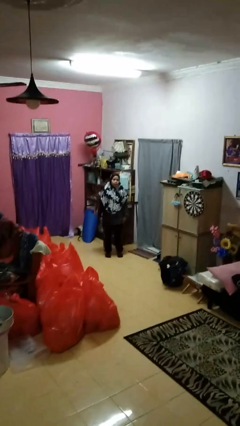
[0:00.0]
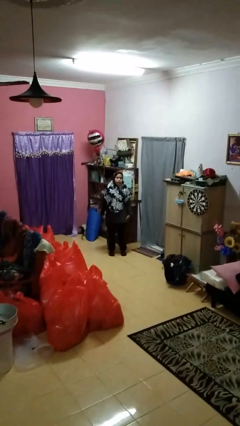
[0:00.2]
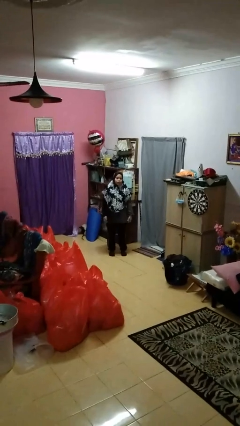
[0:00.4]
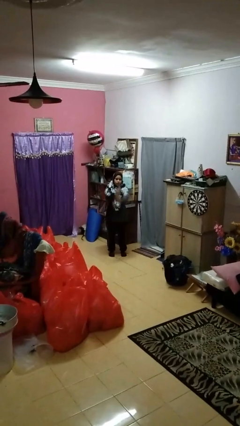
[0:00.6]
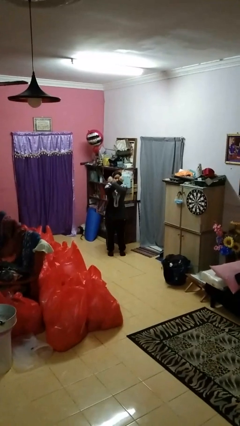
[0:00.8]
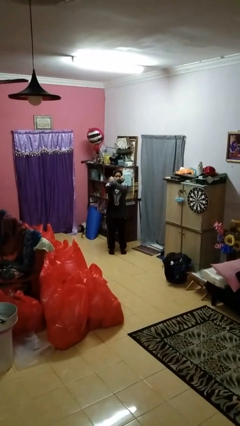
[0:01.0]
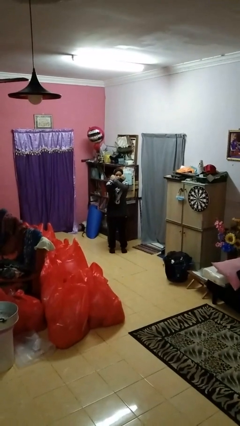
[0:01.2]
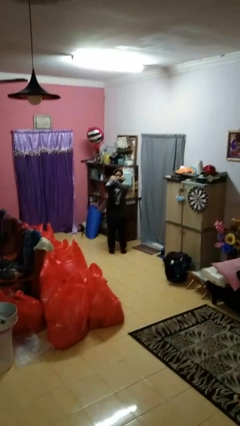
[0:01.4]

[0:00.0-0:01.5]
person crosses arms

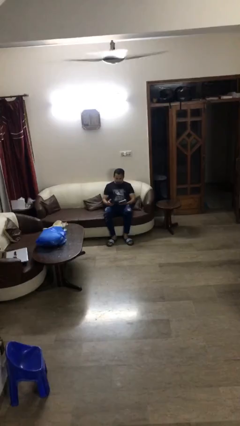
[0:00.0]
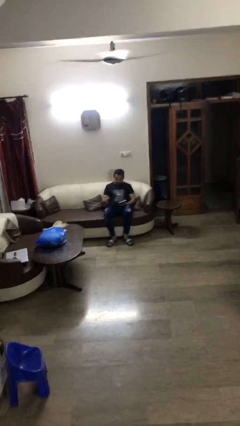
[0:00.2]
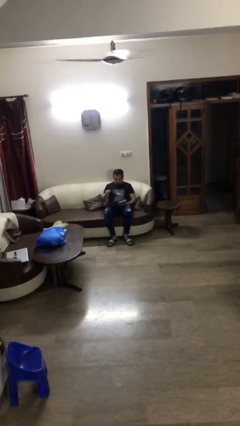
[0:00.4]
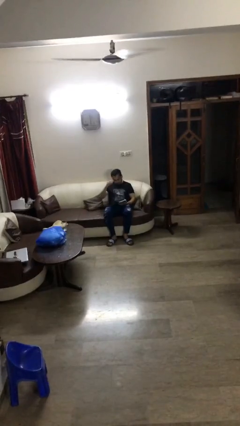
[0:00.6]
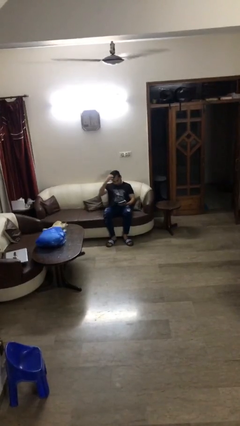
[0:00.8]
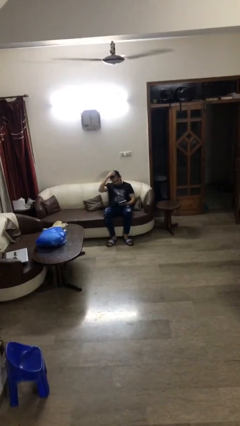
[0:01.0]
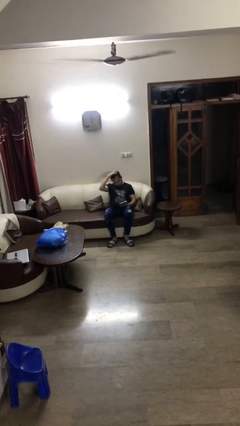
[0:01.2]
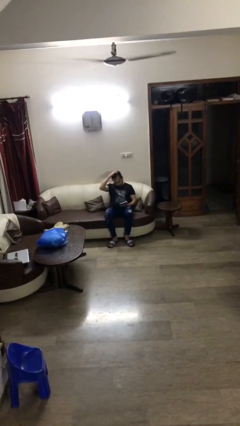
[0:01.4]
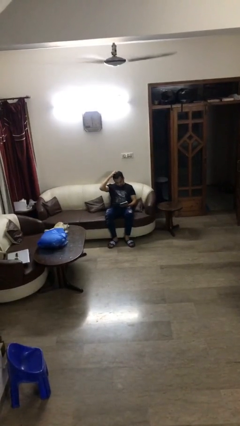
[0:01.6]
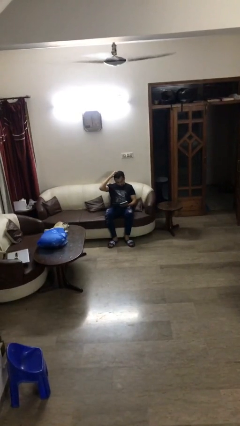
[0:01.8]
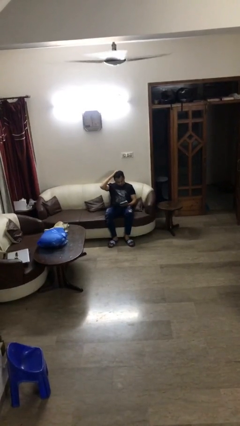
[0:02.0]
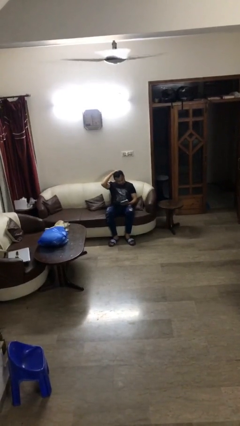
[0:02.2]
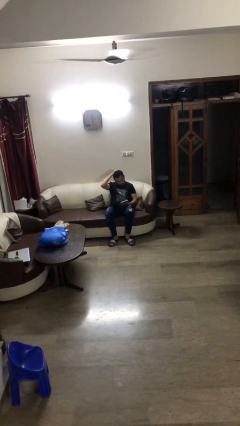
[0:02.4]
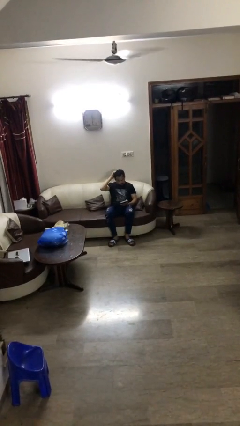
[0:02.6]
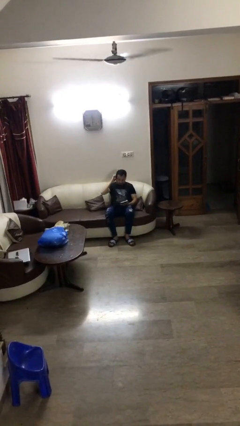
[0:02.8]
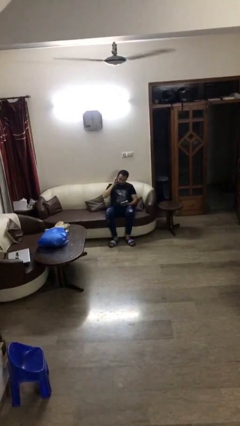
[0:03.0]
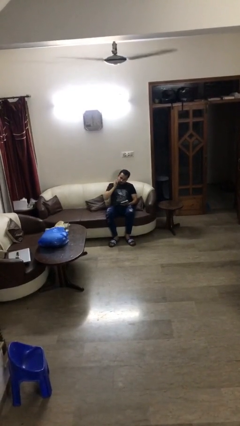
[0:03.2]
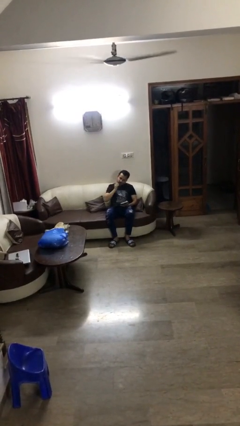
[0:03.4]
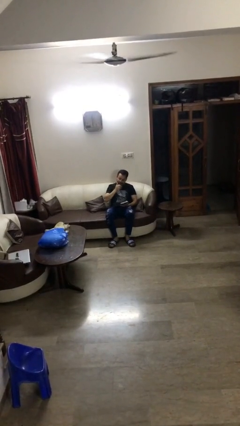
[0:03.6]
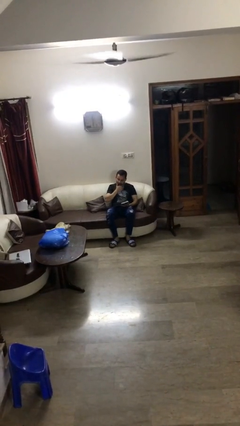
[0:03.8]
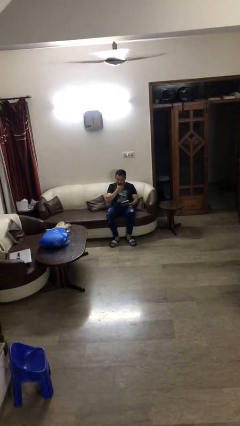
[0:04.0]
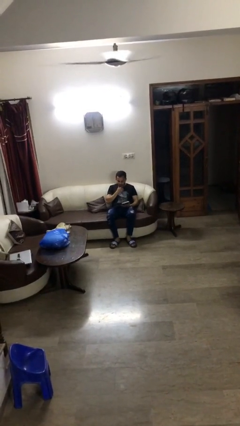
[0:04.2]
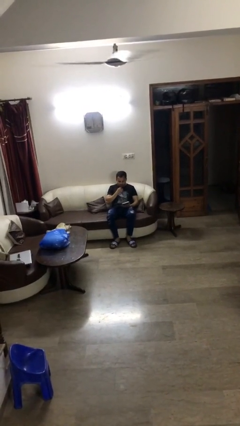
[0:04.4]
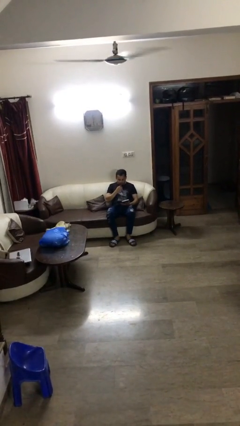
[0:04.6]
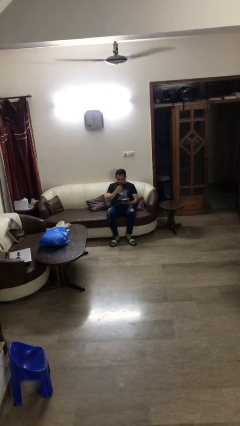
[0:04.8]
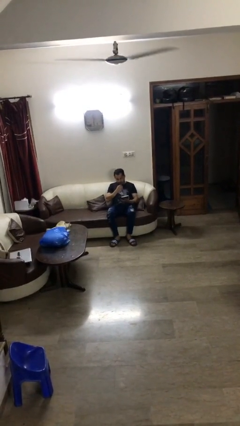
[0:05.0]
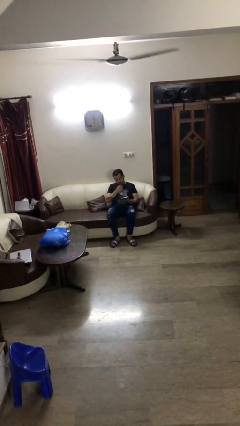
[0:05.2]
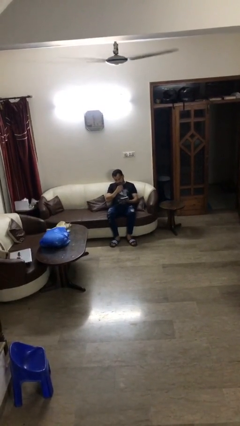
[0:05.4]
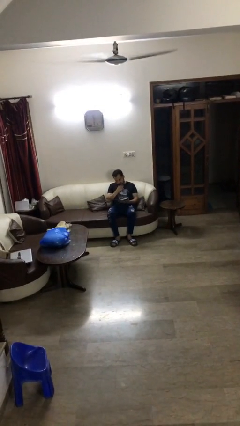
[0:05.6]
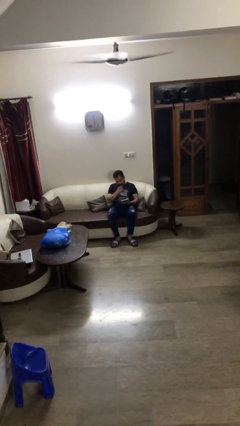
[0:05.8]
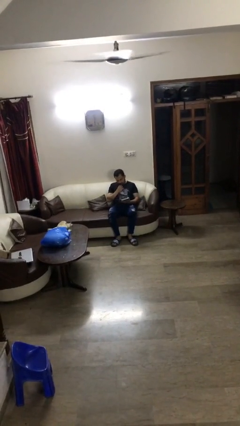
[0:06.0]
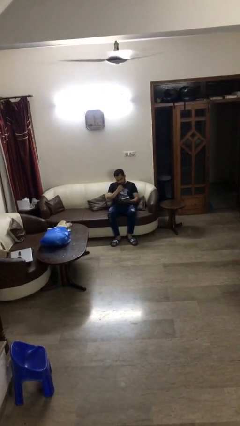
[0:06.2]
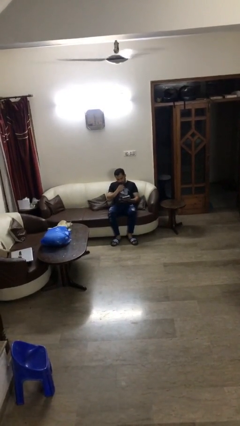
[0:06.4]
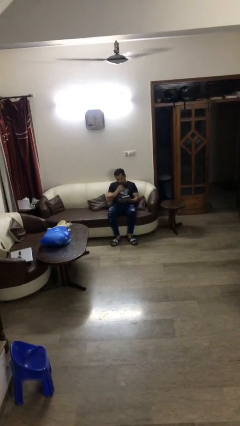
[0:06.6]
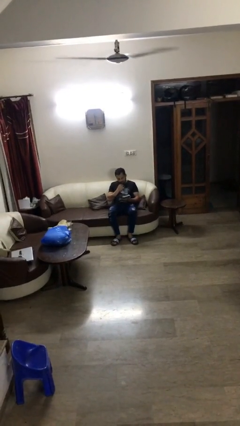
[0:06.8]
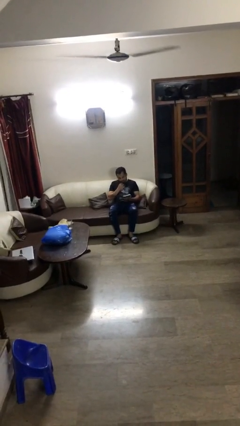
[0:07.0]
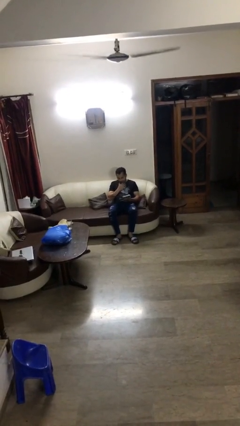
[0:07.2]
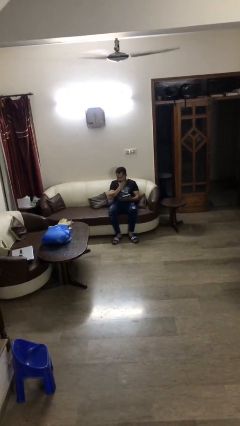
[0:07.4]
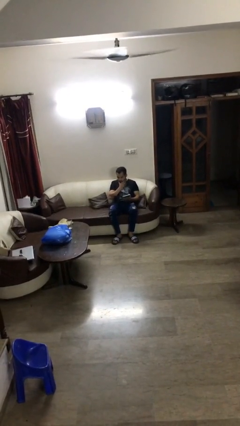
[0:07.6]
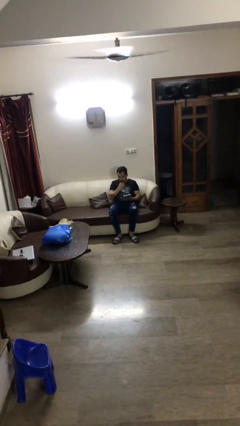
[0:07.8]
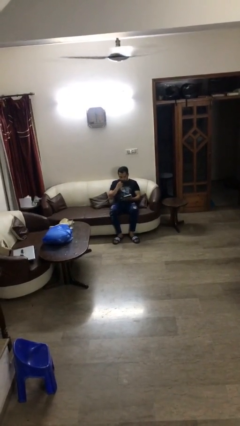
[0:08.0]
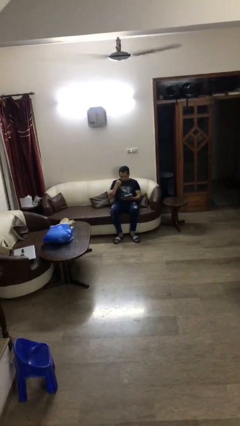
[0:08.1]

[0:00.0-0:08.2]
person reads document

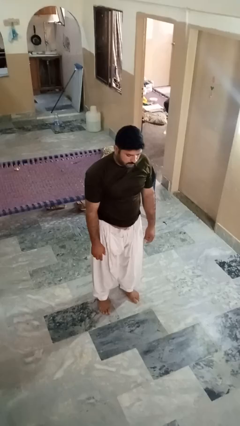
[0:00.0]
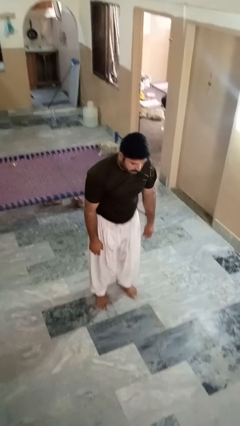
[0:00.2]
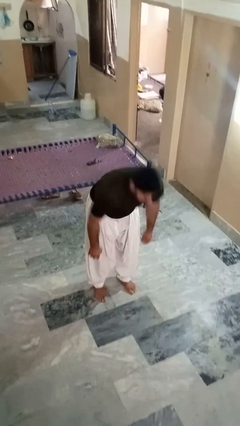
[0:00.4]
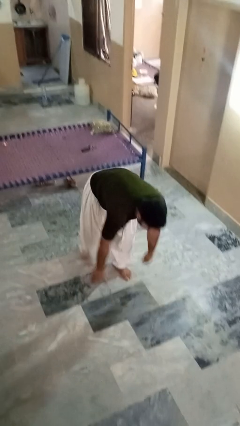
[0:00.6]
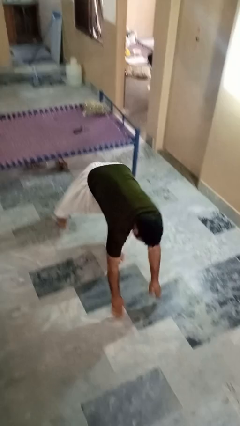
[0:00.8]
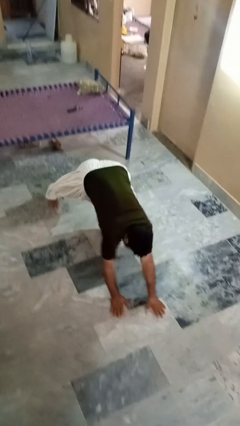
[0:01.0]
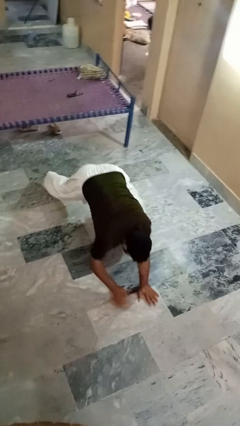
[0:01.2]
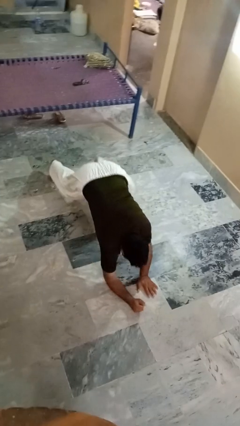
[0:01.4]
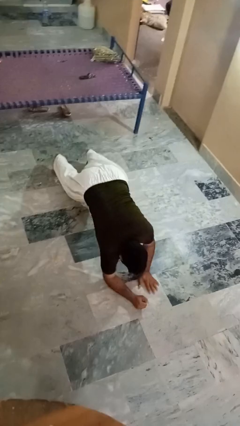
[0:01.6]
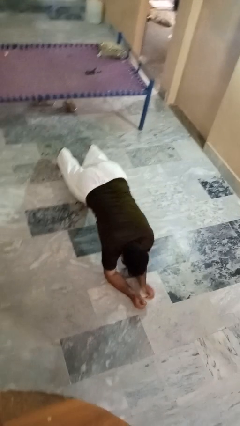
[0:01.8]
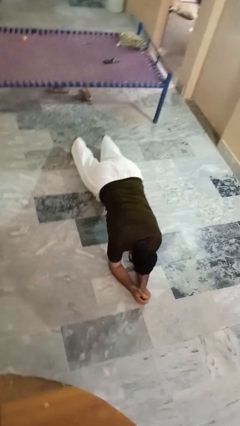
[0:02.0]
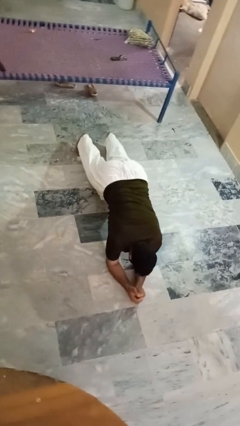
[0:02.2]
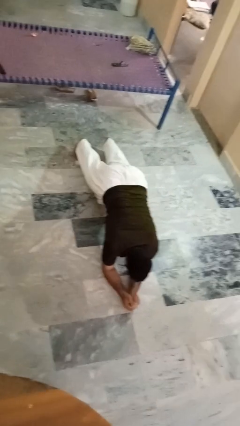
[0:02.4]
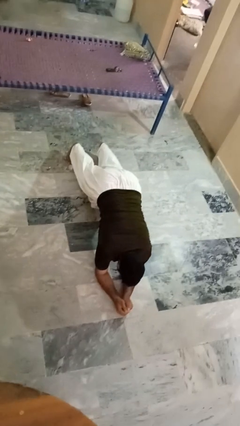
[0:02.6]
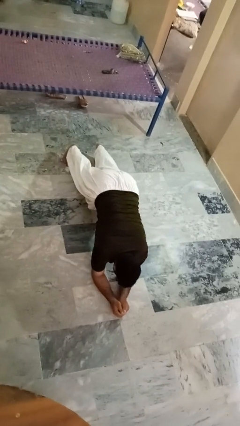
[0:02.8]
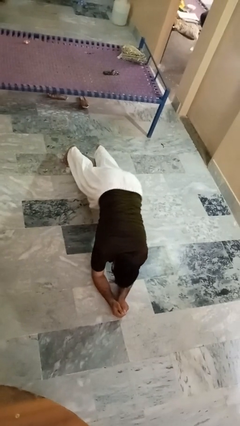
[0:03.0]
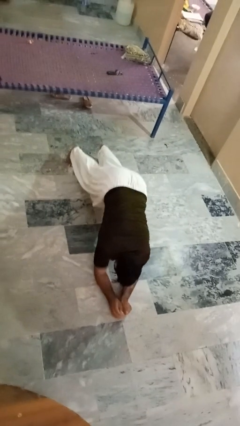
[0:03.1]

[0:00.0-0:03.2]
person exercises with plank

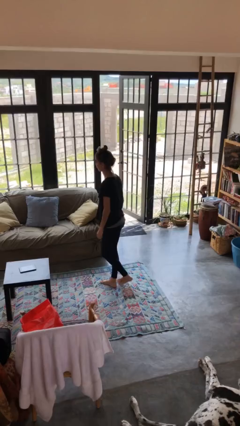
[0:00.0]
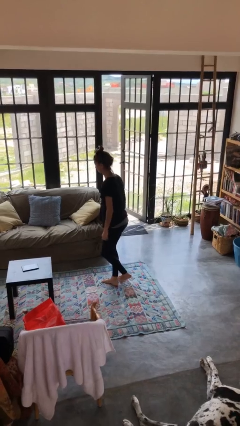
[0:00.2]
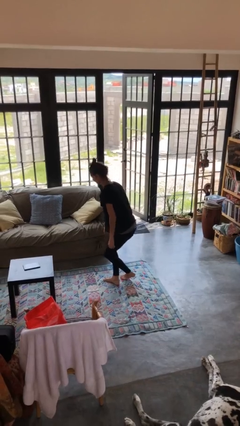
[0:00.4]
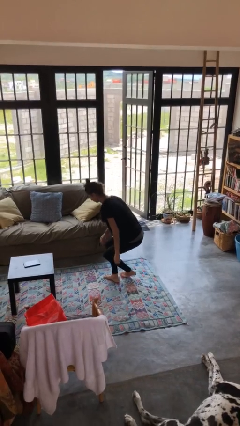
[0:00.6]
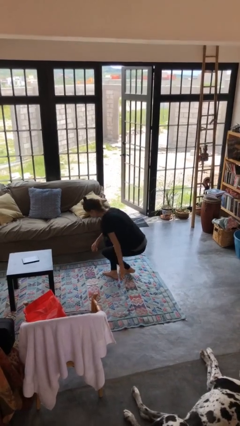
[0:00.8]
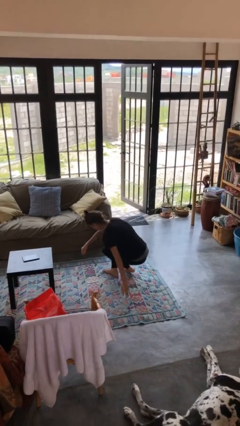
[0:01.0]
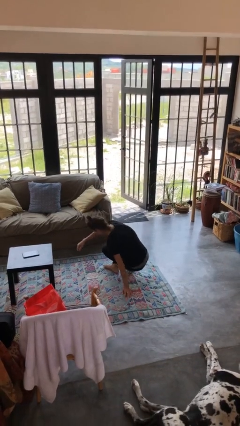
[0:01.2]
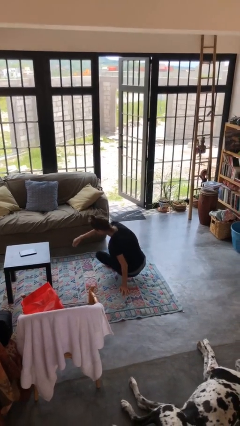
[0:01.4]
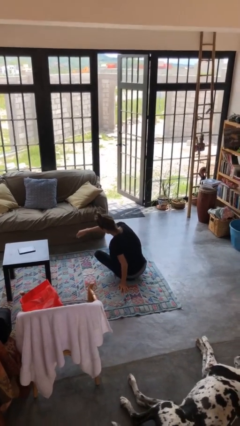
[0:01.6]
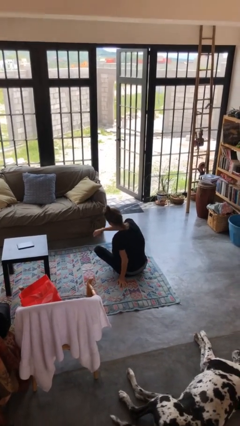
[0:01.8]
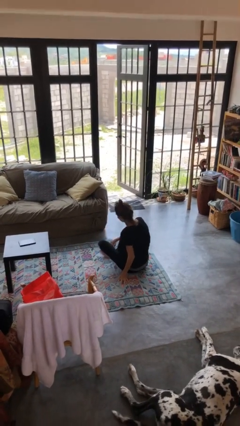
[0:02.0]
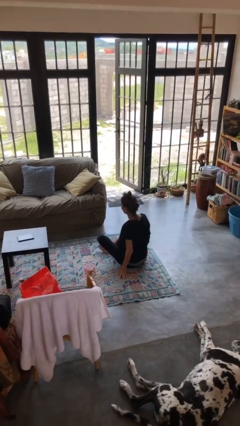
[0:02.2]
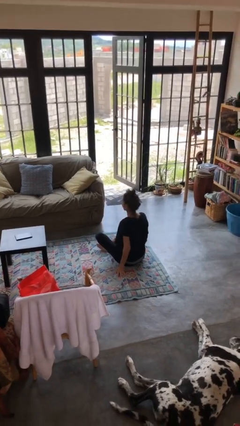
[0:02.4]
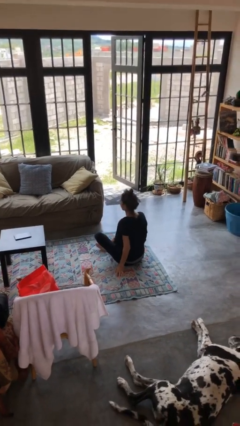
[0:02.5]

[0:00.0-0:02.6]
person sits crisscross

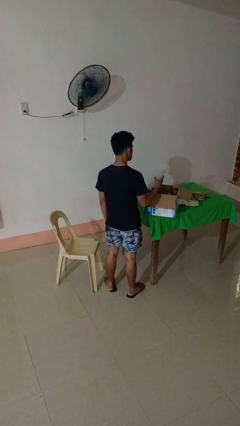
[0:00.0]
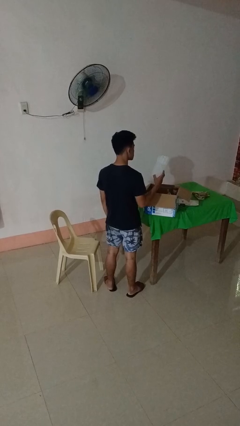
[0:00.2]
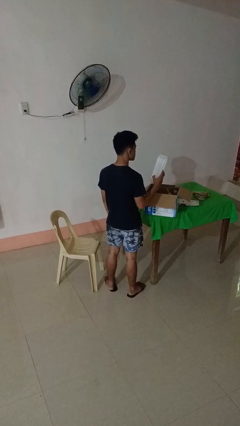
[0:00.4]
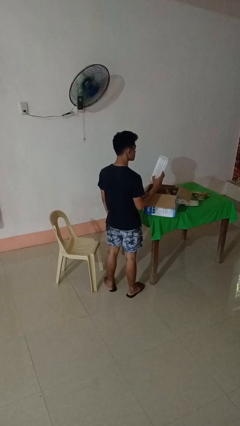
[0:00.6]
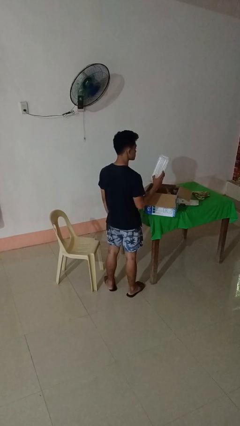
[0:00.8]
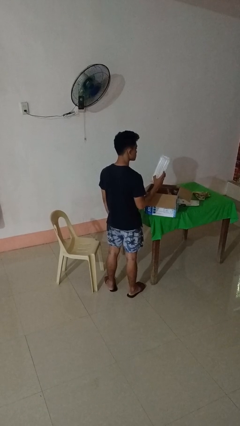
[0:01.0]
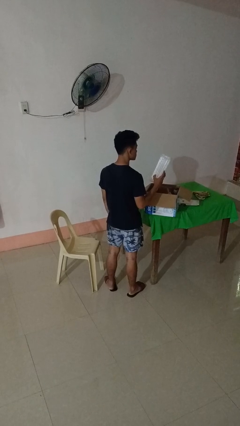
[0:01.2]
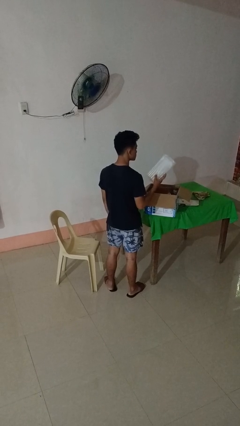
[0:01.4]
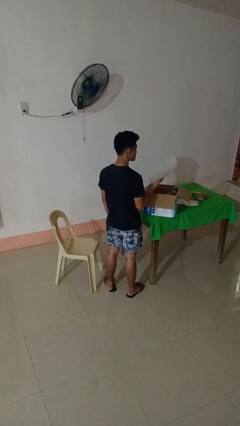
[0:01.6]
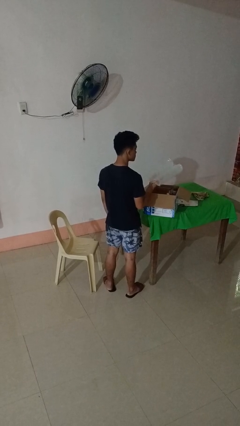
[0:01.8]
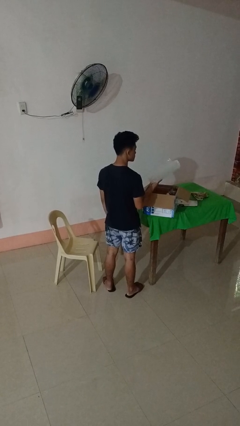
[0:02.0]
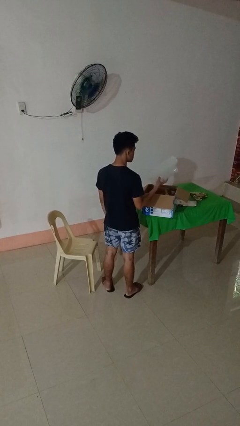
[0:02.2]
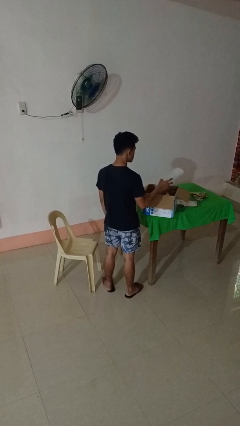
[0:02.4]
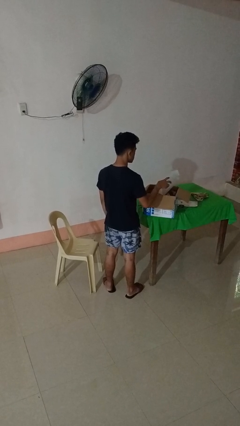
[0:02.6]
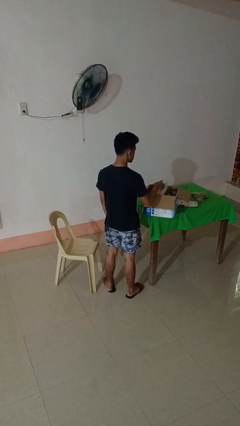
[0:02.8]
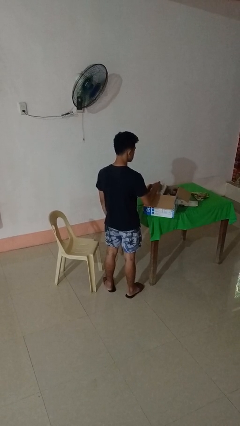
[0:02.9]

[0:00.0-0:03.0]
person takes object from box
